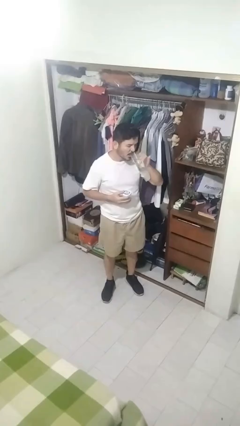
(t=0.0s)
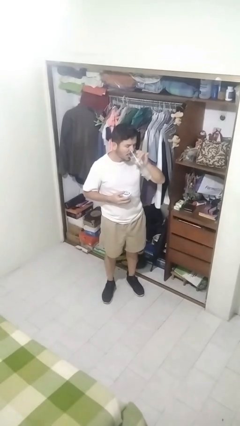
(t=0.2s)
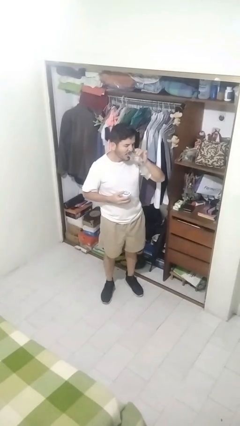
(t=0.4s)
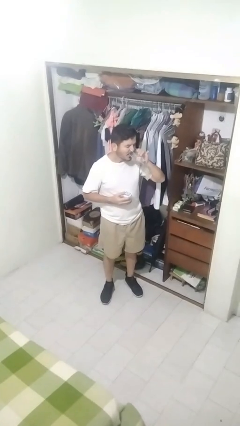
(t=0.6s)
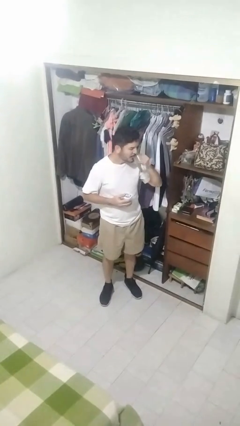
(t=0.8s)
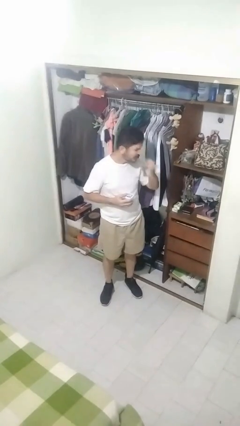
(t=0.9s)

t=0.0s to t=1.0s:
person drinks from cup

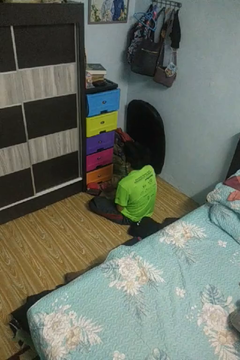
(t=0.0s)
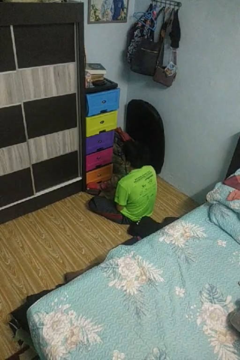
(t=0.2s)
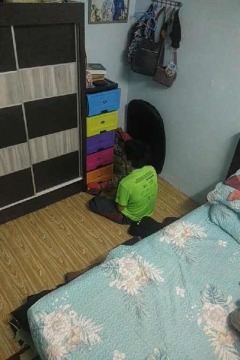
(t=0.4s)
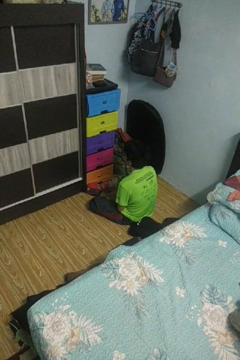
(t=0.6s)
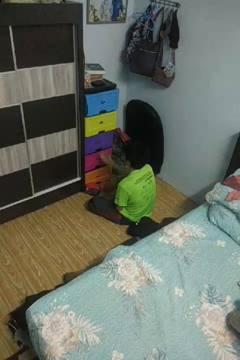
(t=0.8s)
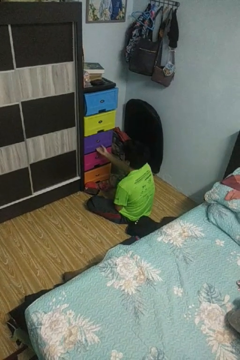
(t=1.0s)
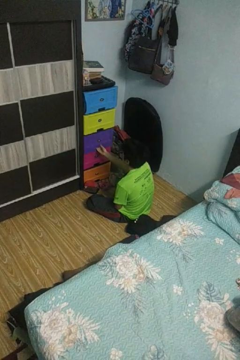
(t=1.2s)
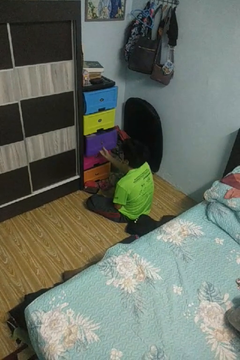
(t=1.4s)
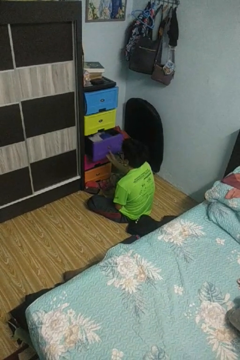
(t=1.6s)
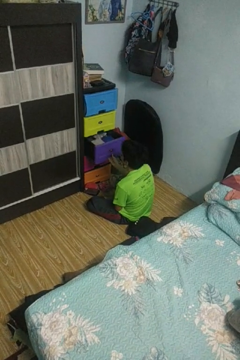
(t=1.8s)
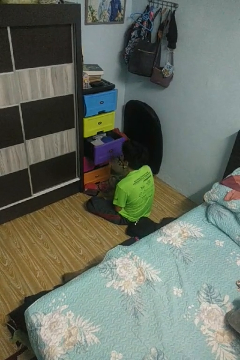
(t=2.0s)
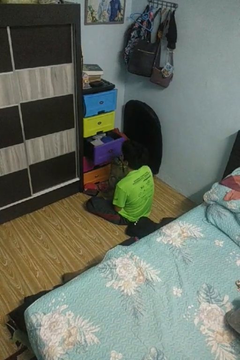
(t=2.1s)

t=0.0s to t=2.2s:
person opens dresser drawer

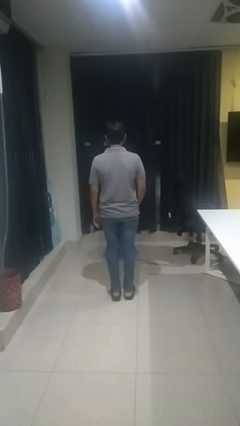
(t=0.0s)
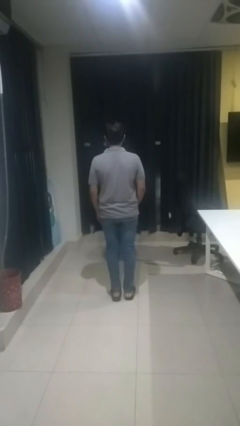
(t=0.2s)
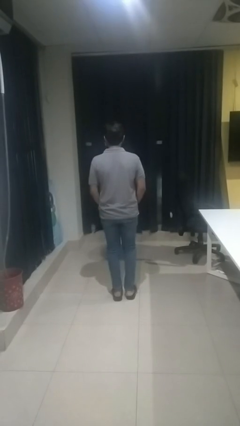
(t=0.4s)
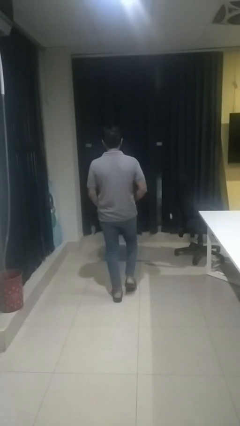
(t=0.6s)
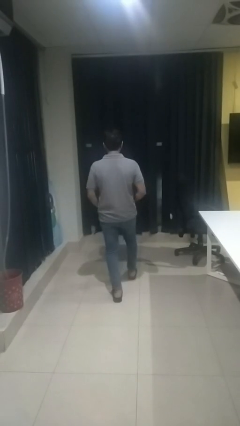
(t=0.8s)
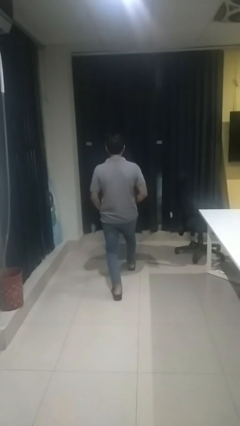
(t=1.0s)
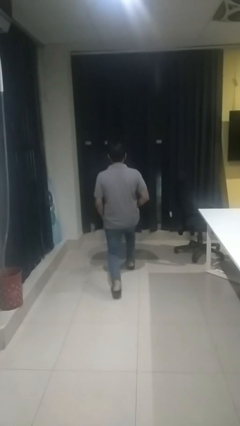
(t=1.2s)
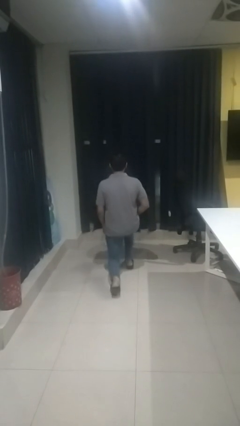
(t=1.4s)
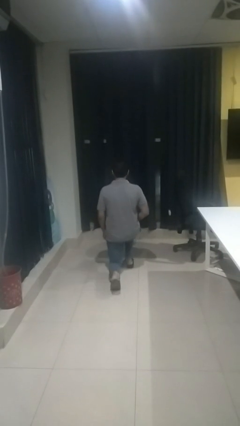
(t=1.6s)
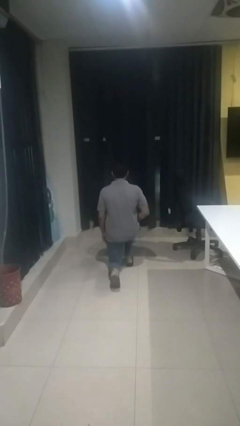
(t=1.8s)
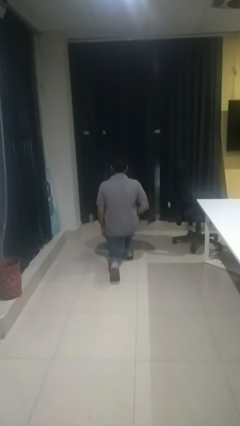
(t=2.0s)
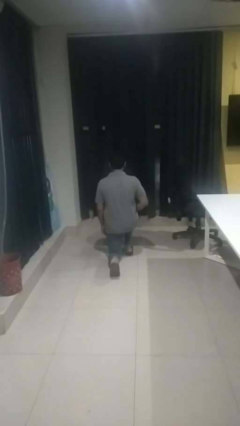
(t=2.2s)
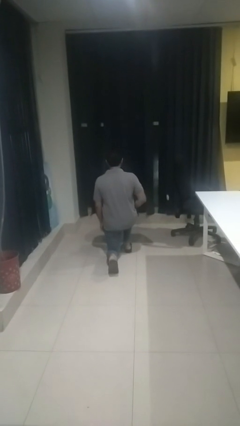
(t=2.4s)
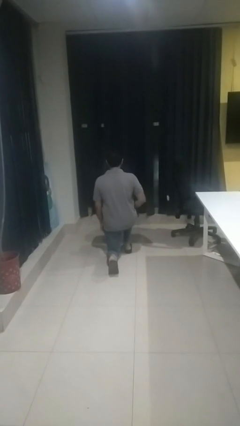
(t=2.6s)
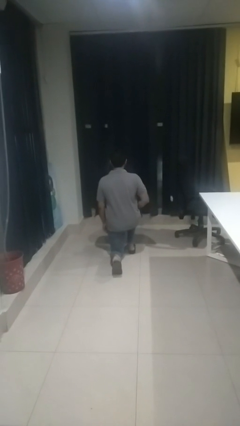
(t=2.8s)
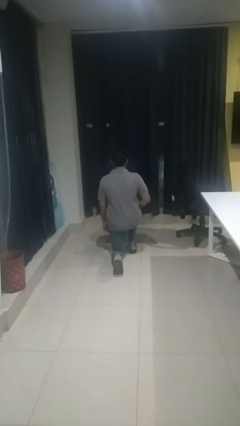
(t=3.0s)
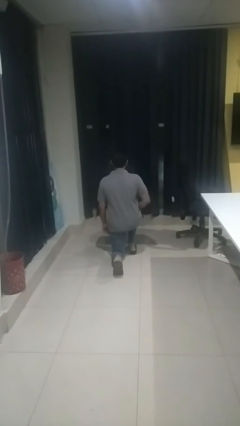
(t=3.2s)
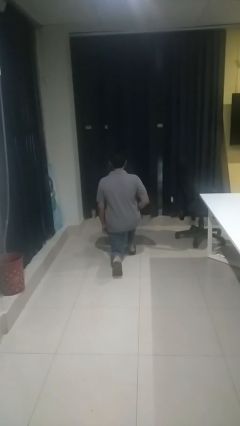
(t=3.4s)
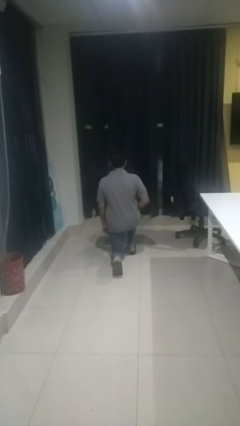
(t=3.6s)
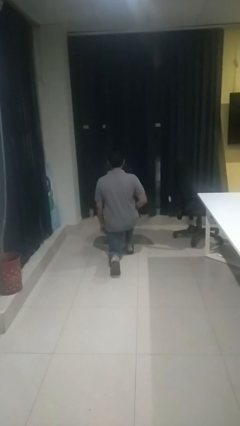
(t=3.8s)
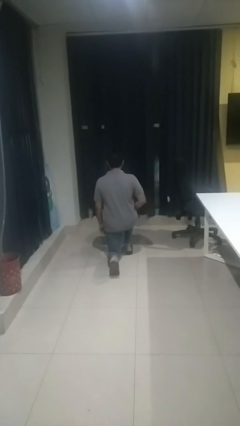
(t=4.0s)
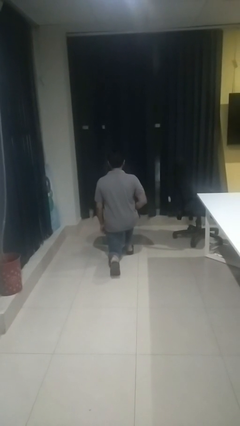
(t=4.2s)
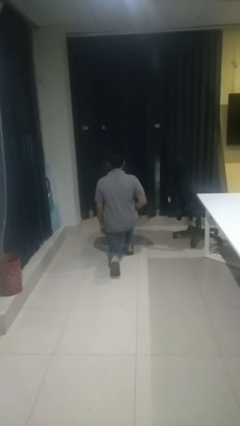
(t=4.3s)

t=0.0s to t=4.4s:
person kneels

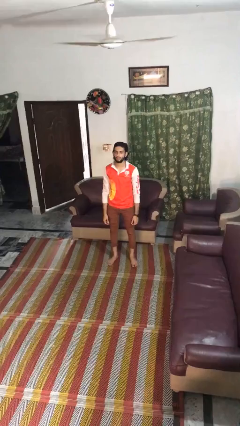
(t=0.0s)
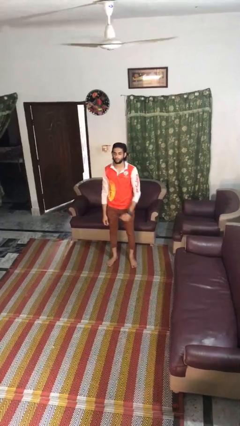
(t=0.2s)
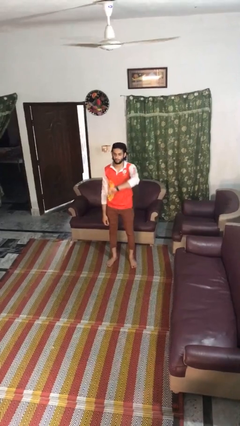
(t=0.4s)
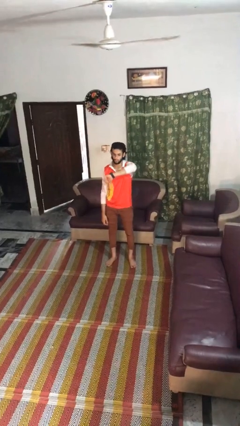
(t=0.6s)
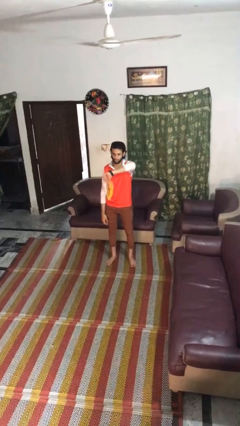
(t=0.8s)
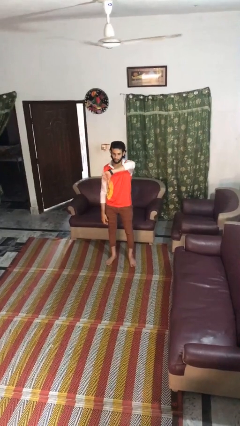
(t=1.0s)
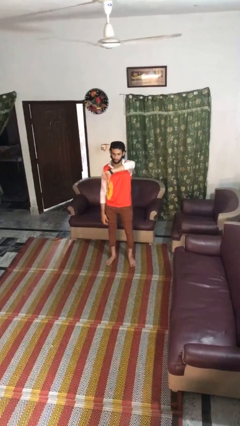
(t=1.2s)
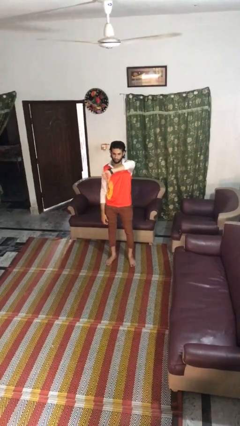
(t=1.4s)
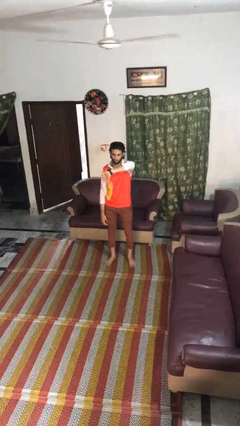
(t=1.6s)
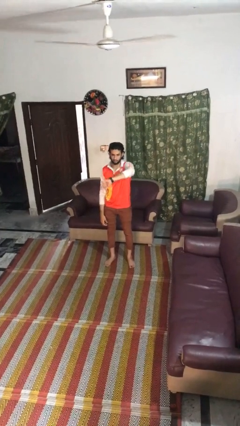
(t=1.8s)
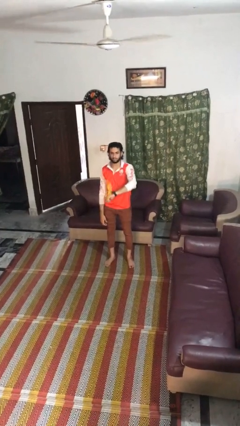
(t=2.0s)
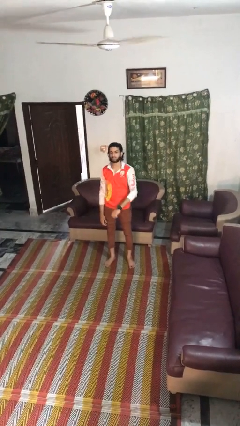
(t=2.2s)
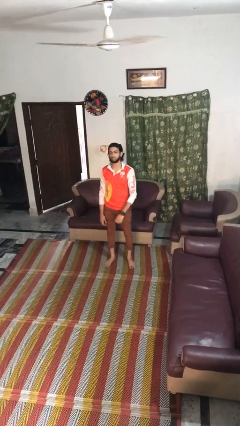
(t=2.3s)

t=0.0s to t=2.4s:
person gestures thumbs down

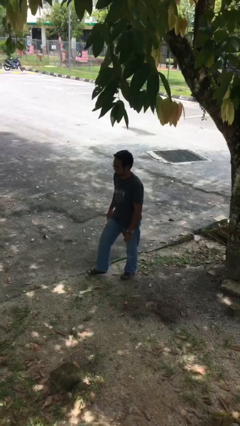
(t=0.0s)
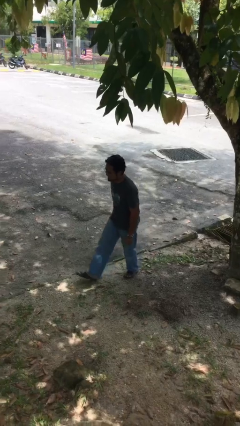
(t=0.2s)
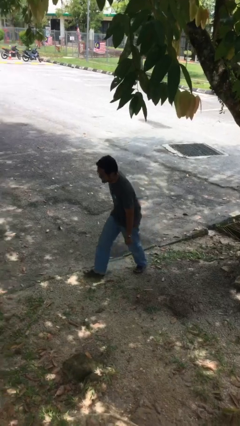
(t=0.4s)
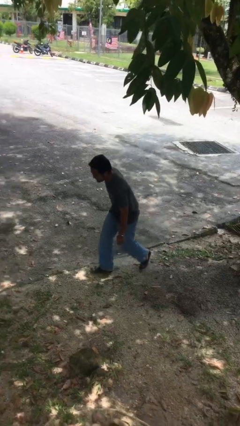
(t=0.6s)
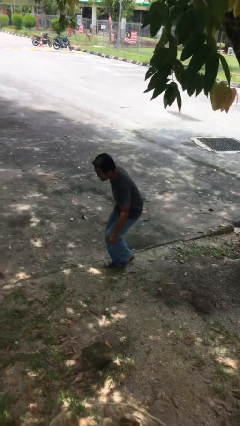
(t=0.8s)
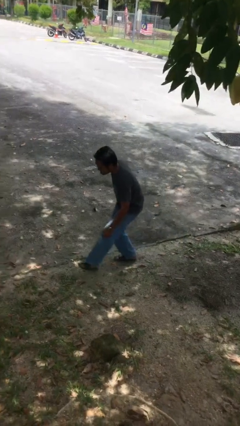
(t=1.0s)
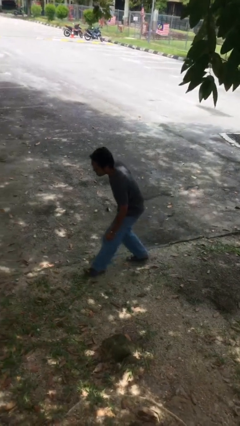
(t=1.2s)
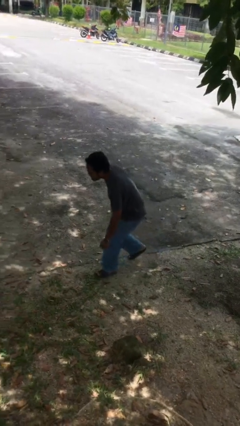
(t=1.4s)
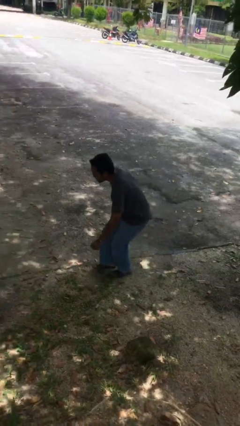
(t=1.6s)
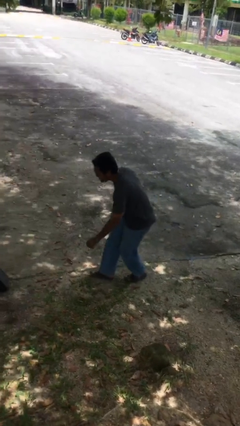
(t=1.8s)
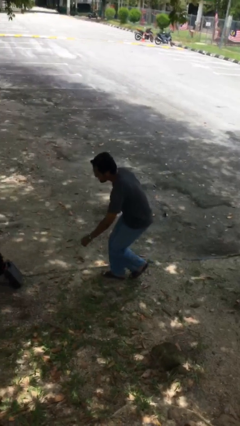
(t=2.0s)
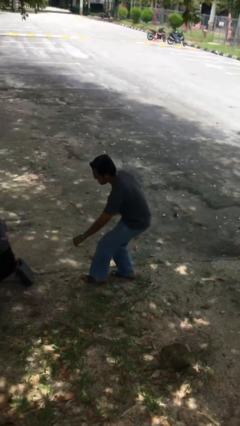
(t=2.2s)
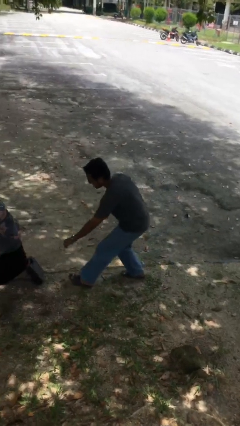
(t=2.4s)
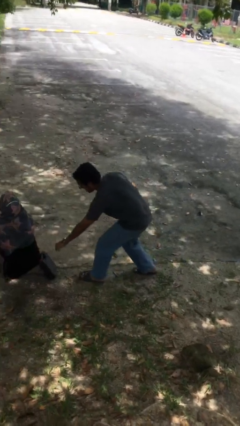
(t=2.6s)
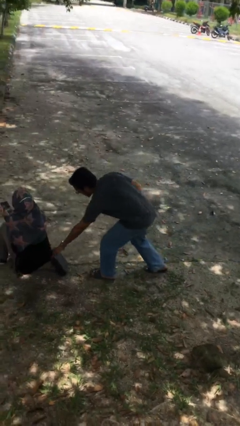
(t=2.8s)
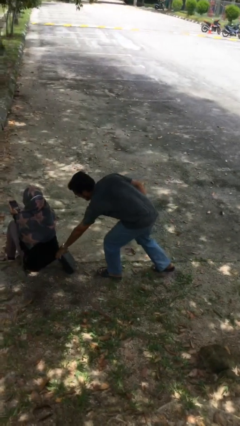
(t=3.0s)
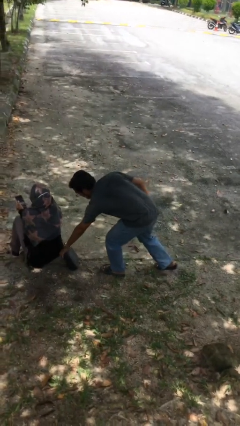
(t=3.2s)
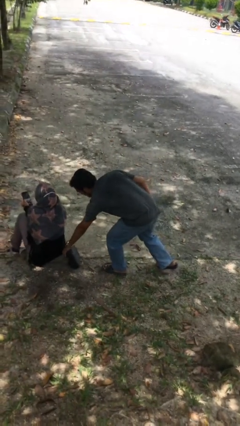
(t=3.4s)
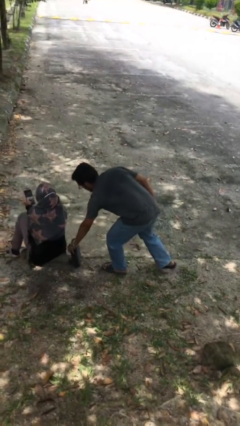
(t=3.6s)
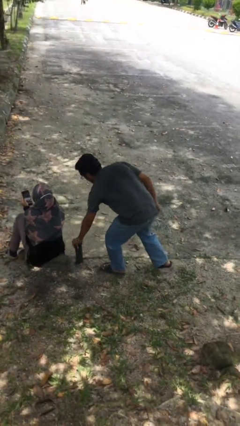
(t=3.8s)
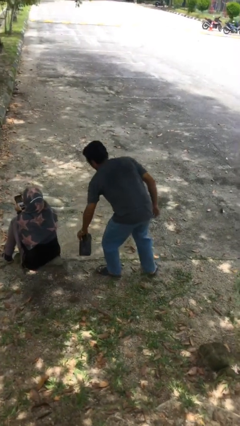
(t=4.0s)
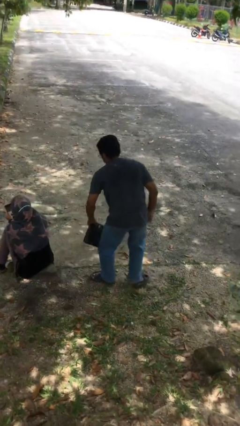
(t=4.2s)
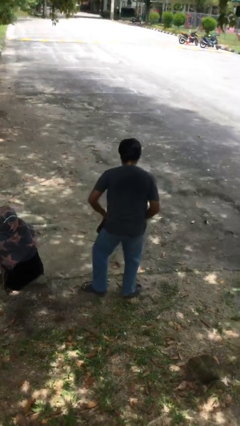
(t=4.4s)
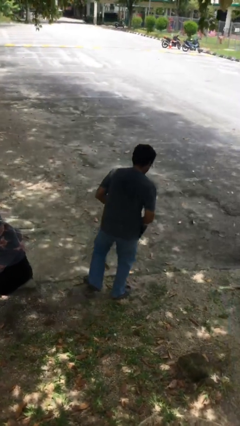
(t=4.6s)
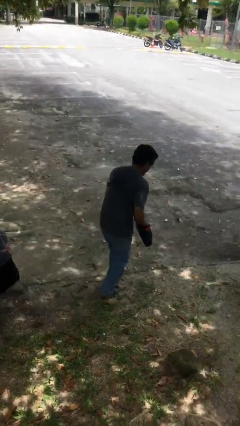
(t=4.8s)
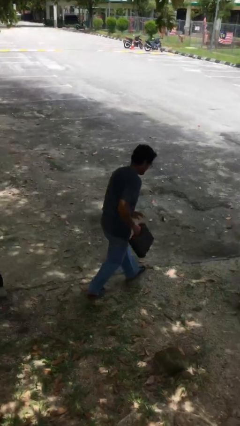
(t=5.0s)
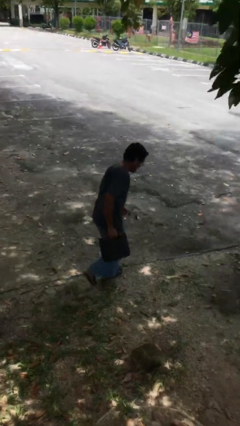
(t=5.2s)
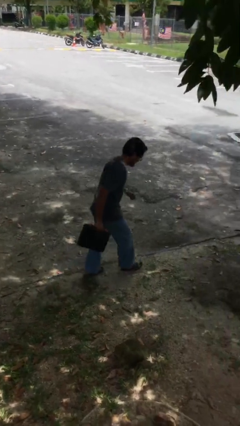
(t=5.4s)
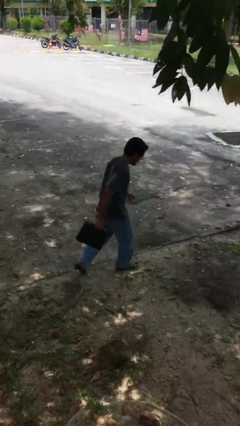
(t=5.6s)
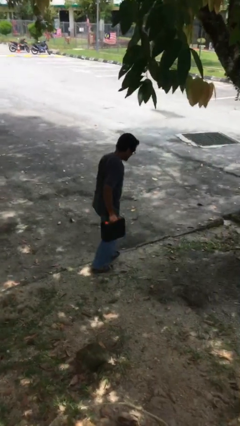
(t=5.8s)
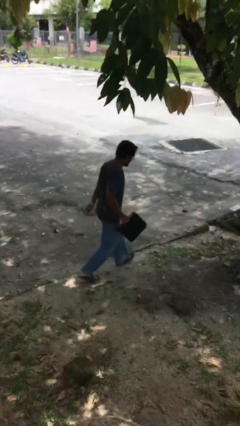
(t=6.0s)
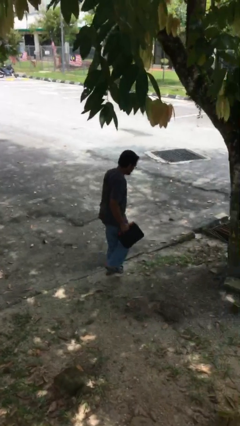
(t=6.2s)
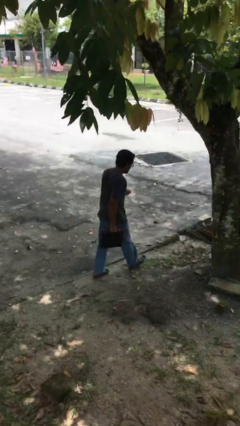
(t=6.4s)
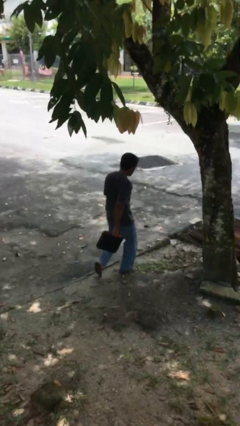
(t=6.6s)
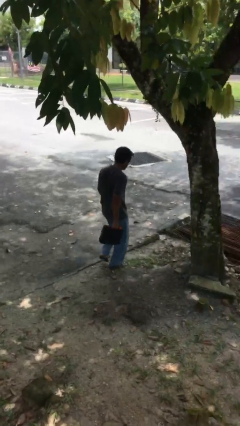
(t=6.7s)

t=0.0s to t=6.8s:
person steals object from person

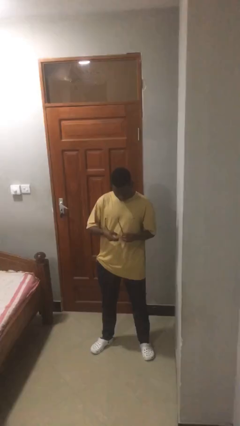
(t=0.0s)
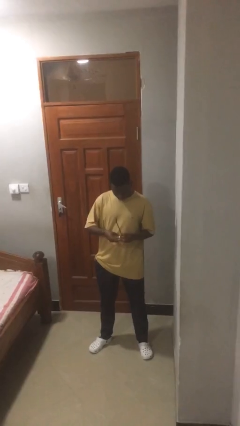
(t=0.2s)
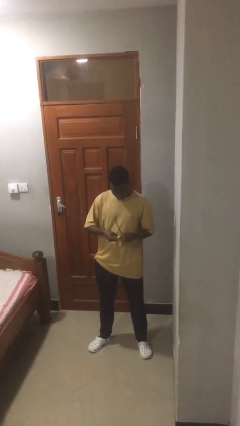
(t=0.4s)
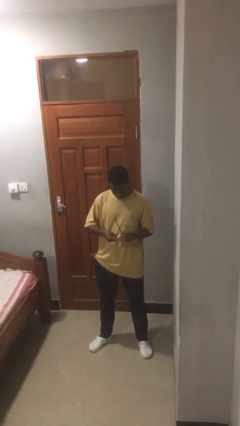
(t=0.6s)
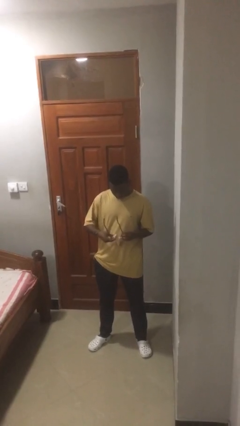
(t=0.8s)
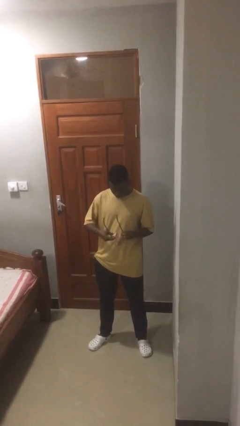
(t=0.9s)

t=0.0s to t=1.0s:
person cleans eyeglasses
